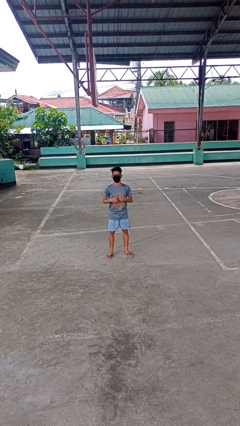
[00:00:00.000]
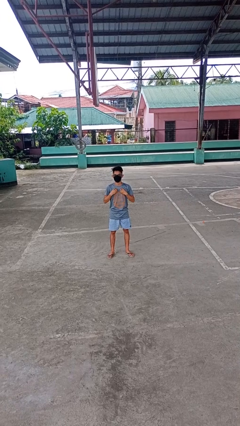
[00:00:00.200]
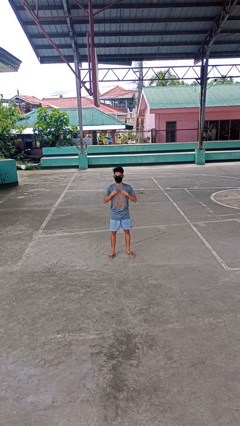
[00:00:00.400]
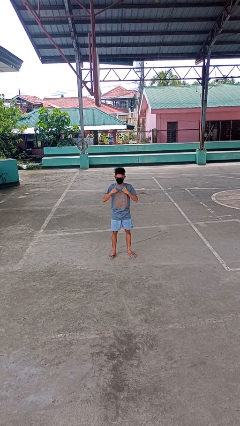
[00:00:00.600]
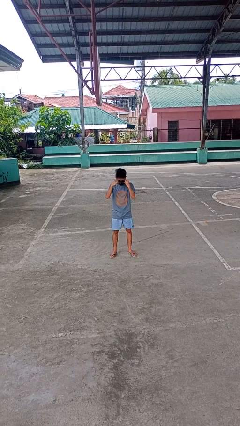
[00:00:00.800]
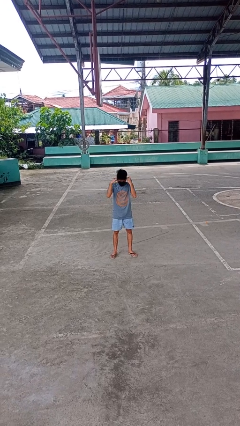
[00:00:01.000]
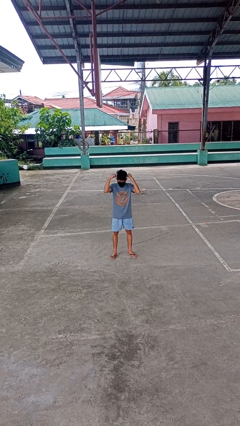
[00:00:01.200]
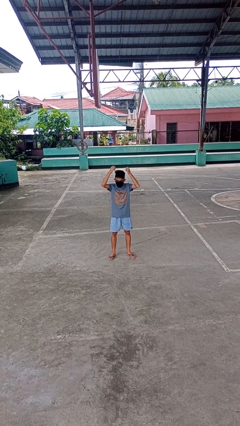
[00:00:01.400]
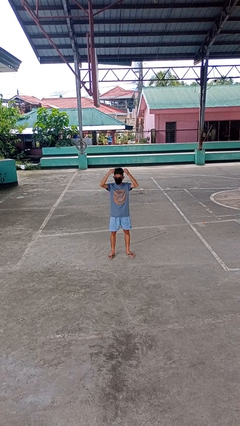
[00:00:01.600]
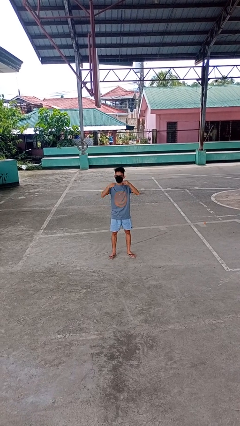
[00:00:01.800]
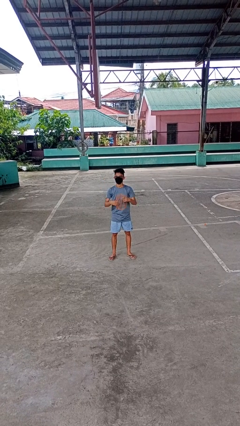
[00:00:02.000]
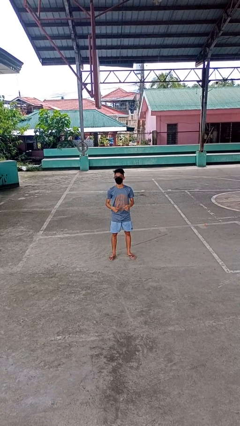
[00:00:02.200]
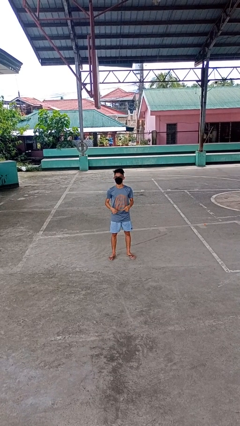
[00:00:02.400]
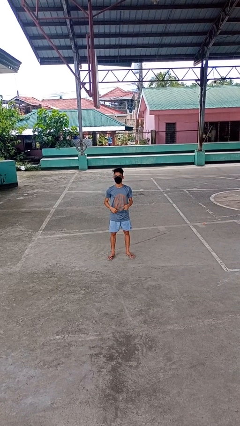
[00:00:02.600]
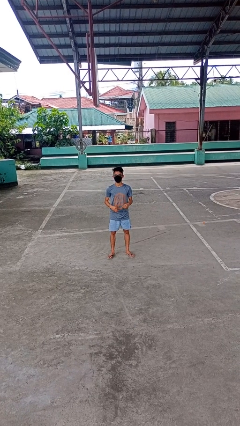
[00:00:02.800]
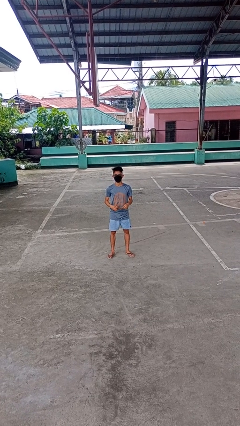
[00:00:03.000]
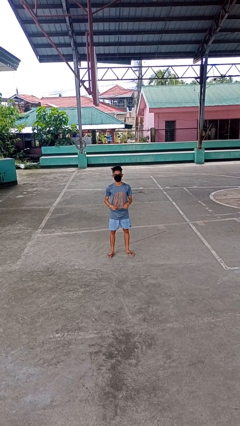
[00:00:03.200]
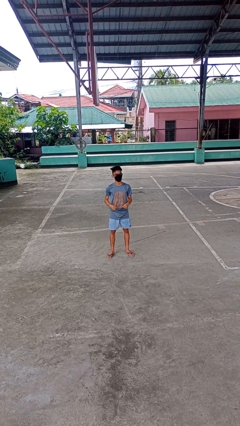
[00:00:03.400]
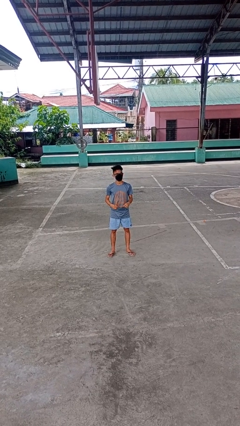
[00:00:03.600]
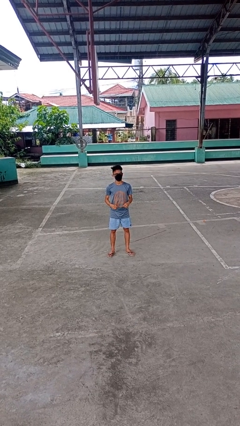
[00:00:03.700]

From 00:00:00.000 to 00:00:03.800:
person takes off necklace

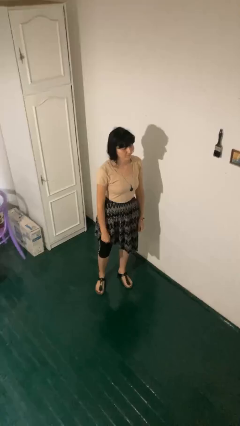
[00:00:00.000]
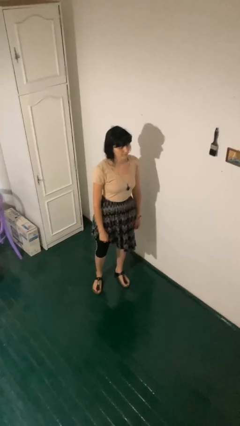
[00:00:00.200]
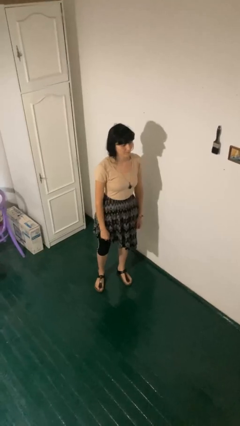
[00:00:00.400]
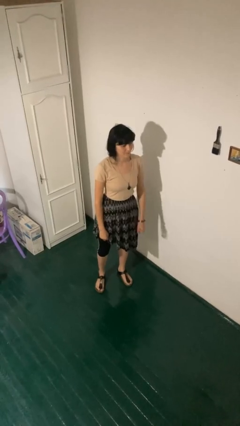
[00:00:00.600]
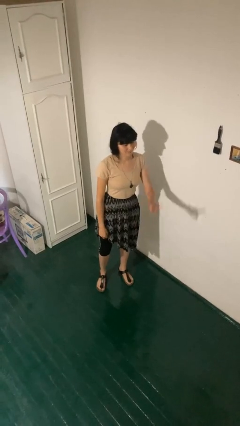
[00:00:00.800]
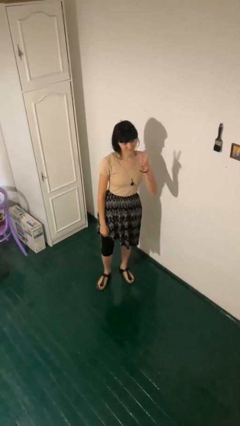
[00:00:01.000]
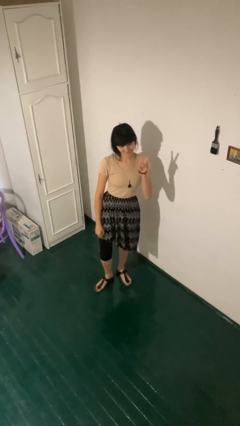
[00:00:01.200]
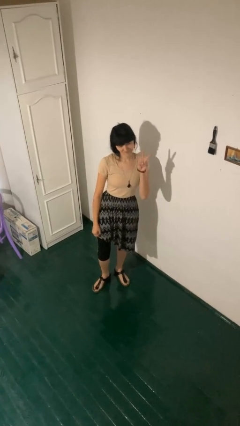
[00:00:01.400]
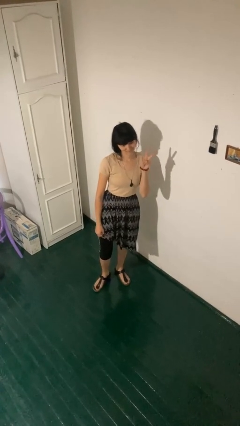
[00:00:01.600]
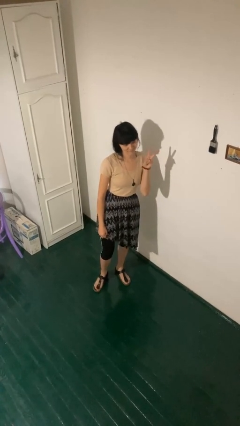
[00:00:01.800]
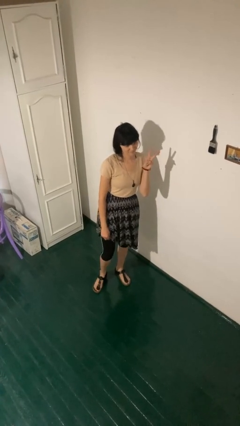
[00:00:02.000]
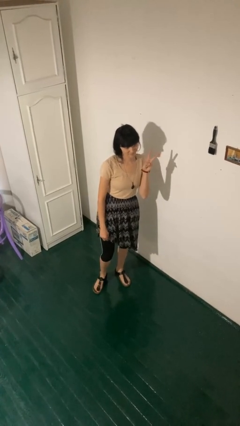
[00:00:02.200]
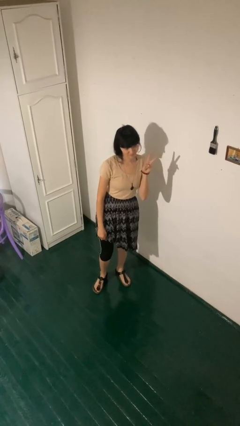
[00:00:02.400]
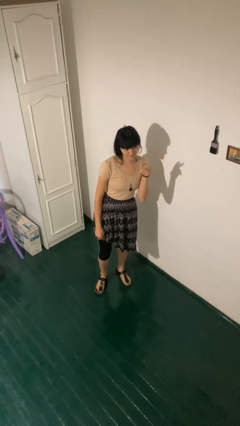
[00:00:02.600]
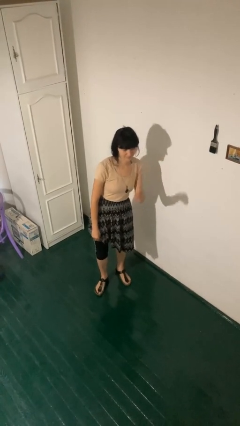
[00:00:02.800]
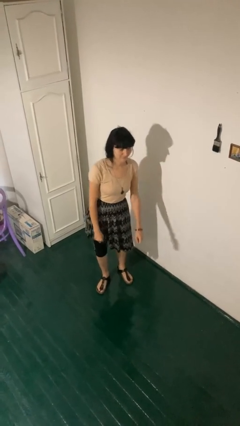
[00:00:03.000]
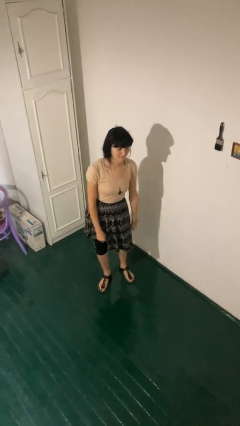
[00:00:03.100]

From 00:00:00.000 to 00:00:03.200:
person gestures peace

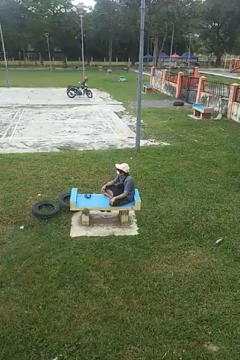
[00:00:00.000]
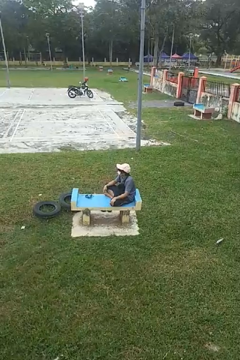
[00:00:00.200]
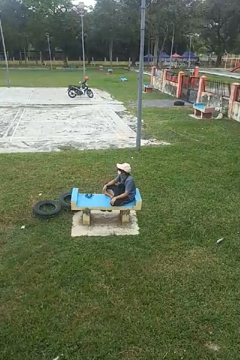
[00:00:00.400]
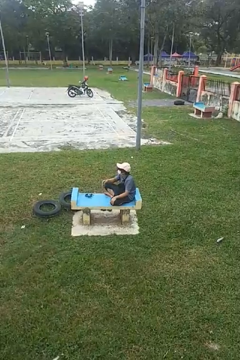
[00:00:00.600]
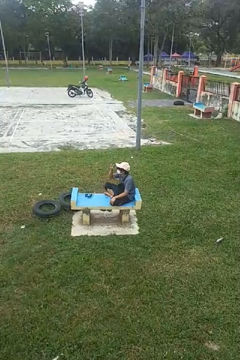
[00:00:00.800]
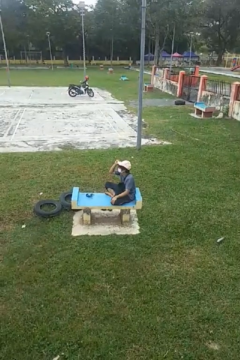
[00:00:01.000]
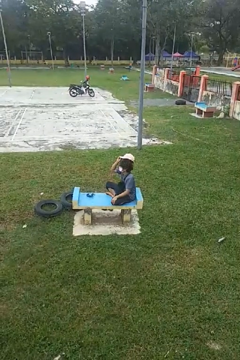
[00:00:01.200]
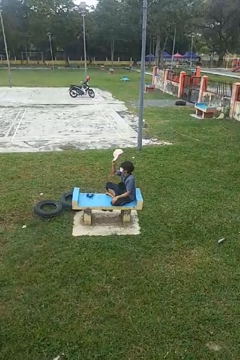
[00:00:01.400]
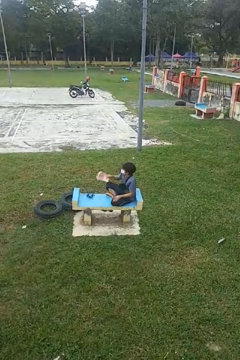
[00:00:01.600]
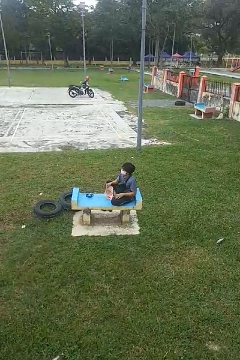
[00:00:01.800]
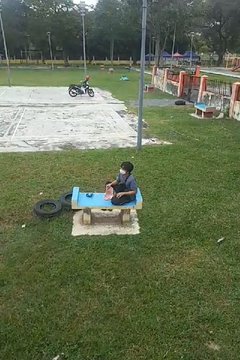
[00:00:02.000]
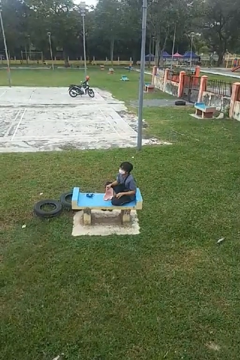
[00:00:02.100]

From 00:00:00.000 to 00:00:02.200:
person takes off hat

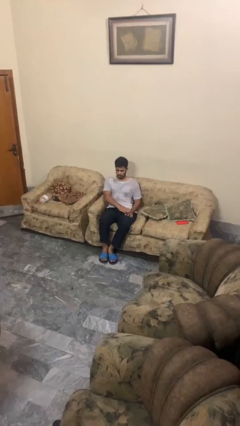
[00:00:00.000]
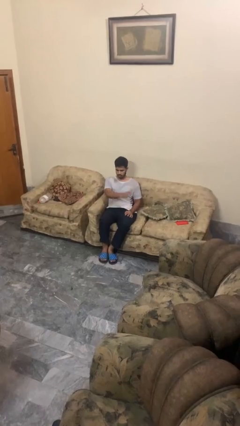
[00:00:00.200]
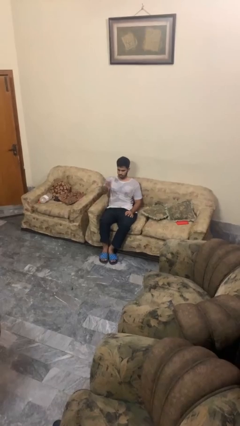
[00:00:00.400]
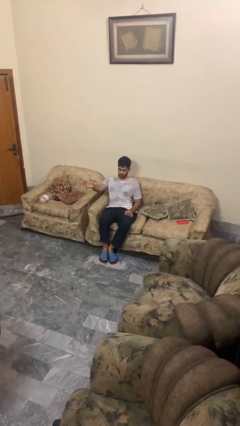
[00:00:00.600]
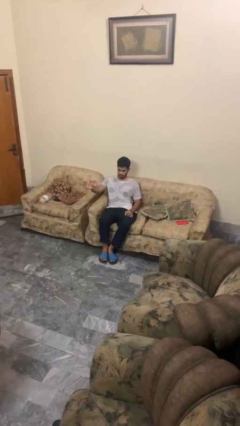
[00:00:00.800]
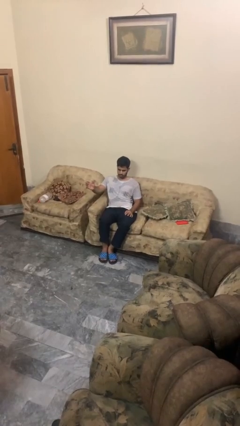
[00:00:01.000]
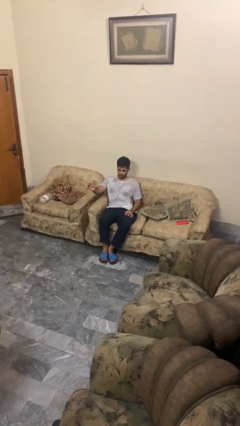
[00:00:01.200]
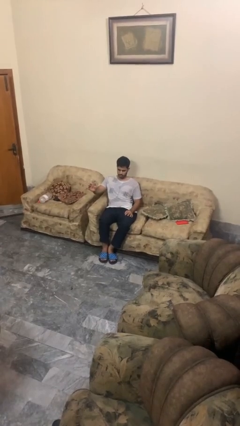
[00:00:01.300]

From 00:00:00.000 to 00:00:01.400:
person gestures swipe right

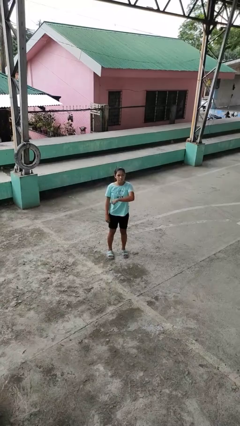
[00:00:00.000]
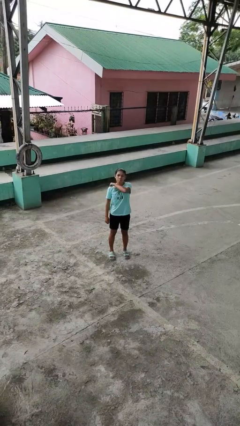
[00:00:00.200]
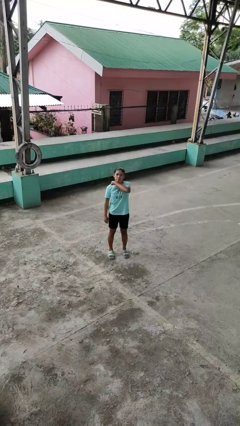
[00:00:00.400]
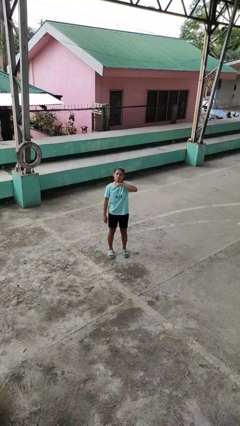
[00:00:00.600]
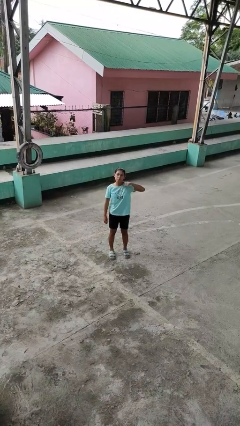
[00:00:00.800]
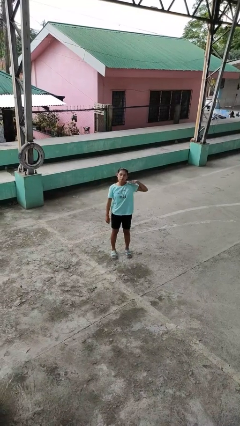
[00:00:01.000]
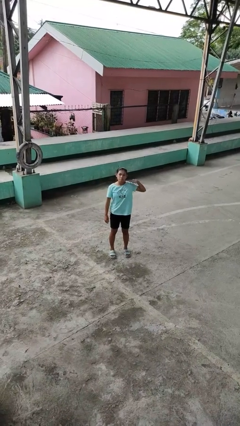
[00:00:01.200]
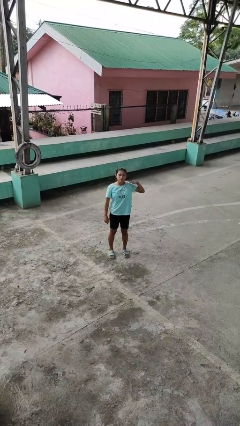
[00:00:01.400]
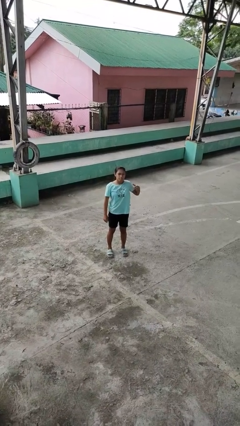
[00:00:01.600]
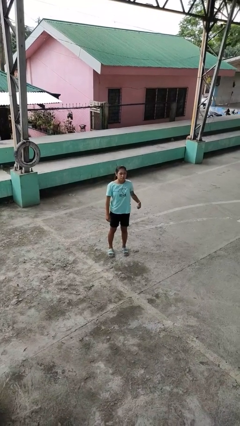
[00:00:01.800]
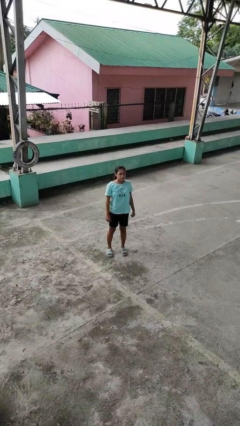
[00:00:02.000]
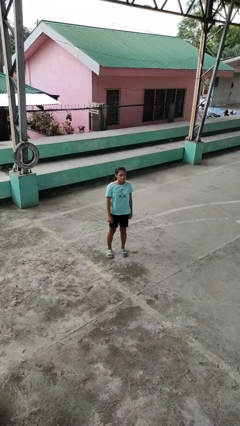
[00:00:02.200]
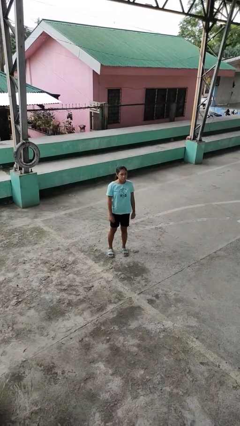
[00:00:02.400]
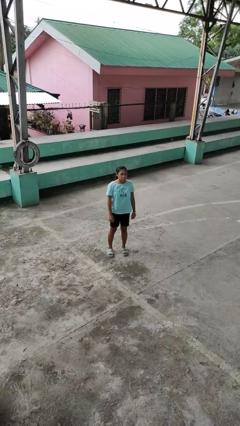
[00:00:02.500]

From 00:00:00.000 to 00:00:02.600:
person gestures cut

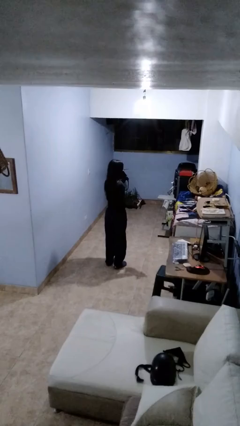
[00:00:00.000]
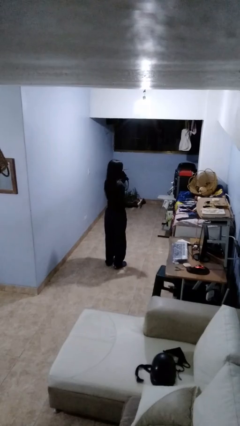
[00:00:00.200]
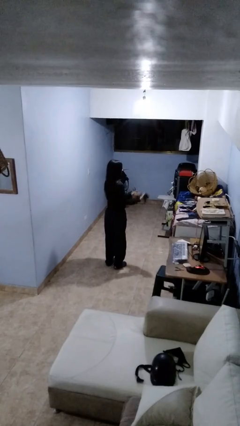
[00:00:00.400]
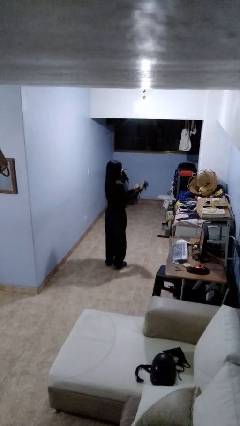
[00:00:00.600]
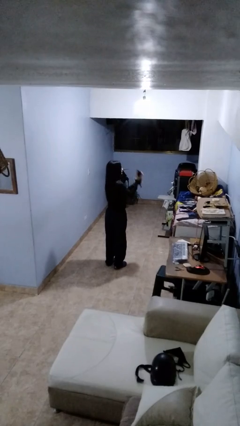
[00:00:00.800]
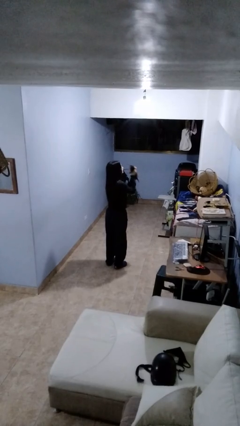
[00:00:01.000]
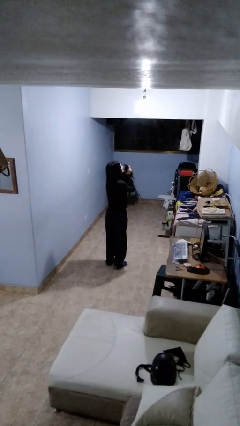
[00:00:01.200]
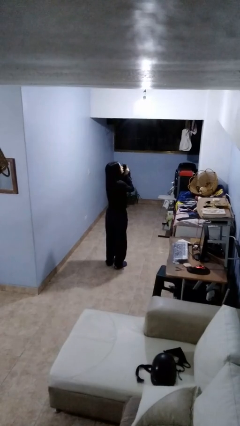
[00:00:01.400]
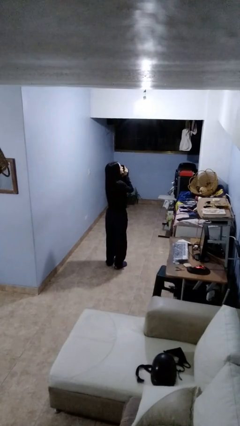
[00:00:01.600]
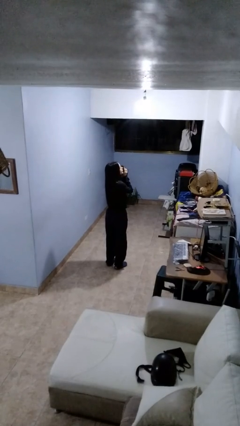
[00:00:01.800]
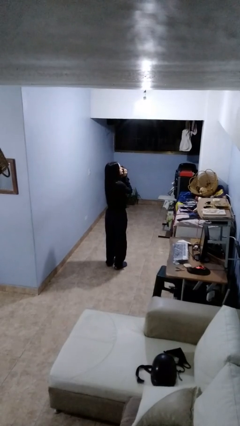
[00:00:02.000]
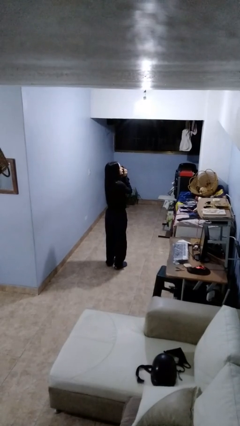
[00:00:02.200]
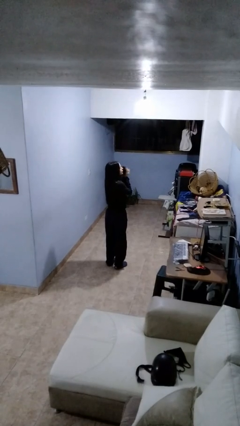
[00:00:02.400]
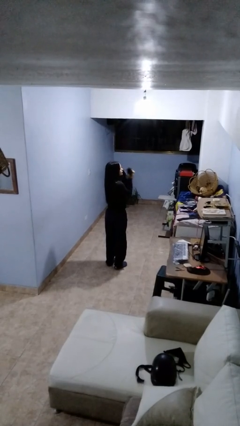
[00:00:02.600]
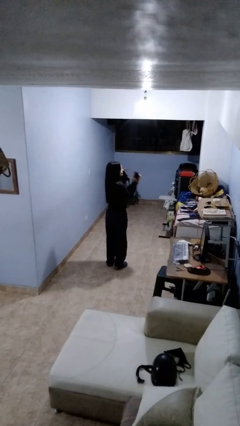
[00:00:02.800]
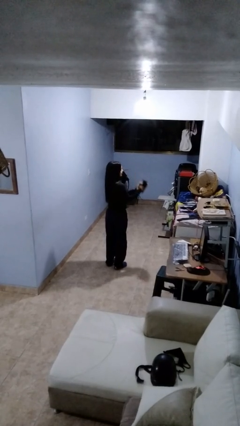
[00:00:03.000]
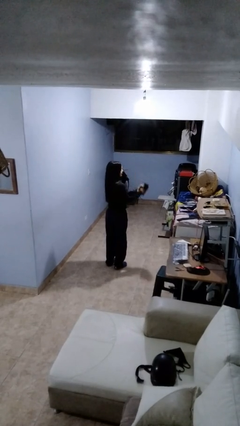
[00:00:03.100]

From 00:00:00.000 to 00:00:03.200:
person hugs cat

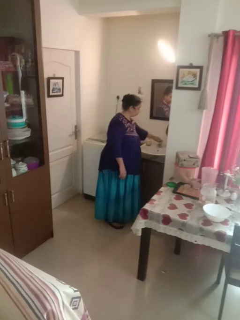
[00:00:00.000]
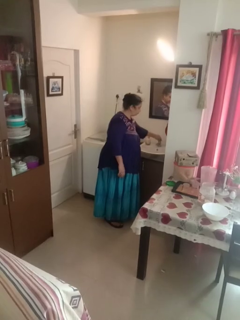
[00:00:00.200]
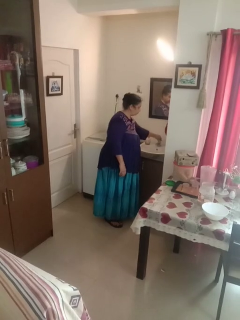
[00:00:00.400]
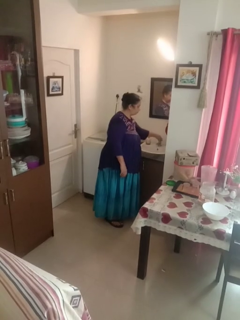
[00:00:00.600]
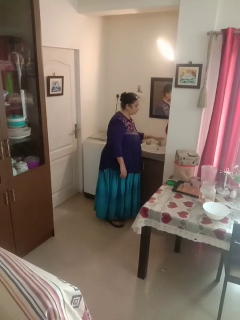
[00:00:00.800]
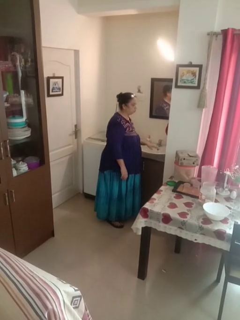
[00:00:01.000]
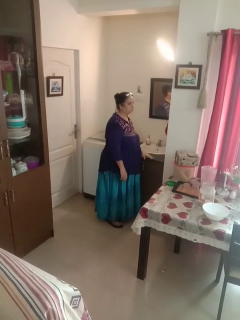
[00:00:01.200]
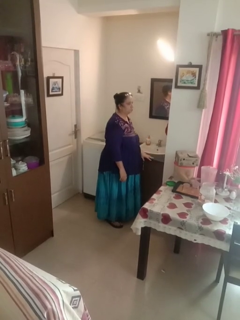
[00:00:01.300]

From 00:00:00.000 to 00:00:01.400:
person turns on faucet

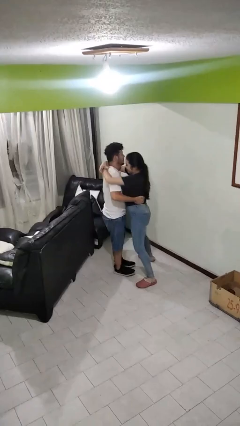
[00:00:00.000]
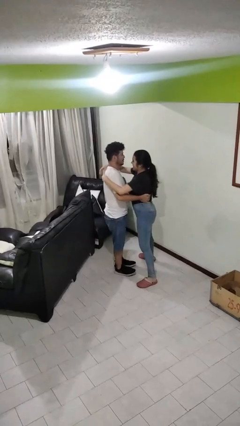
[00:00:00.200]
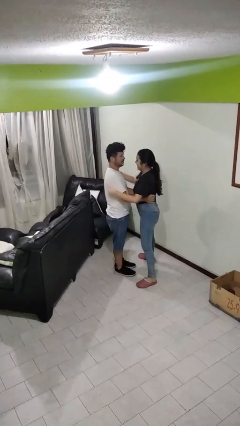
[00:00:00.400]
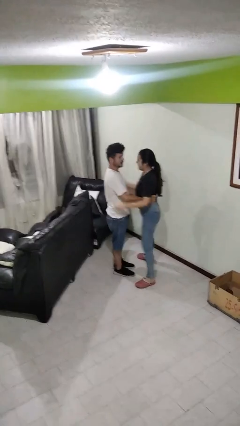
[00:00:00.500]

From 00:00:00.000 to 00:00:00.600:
person puts down person
